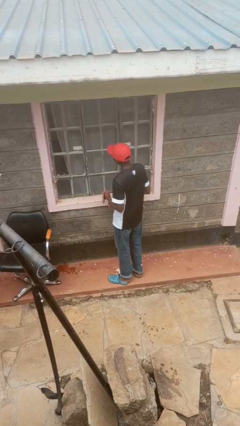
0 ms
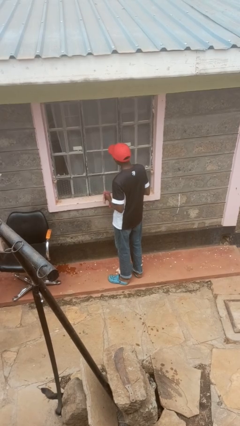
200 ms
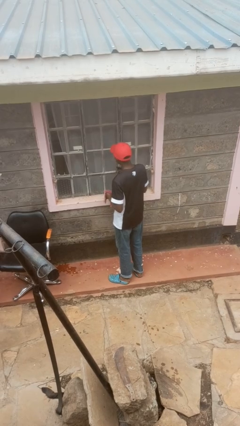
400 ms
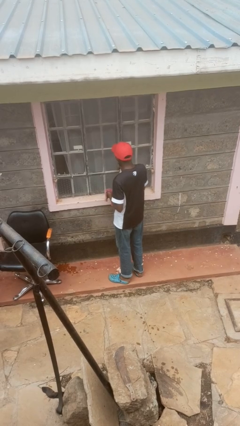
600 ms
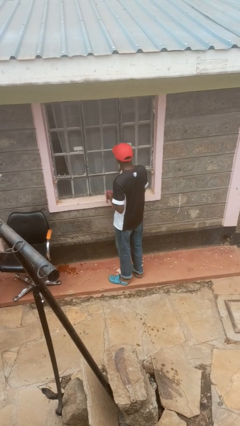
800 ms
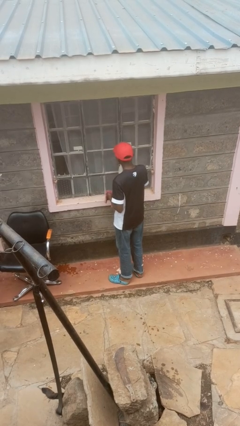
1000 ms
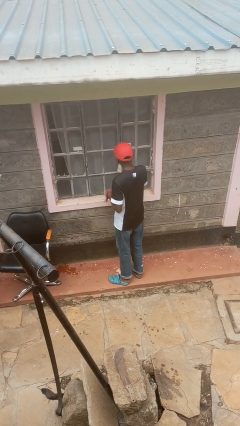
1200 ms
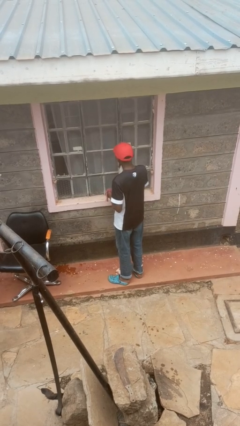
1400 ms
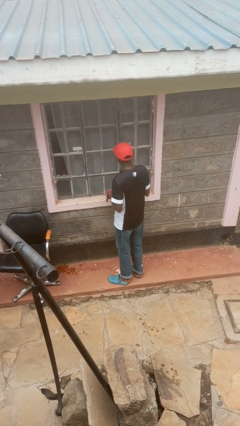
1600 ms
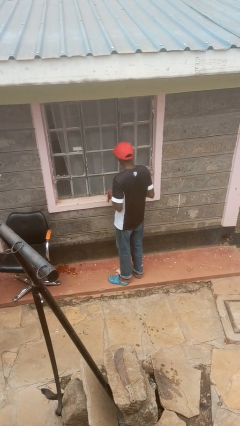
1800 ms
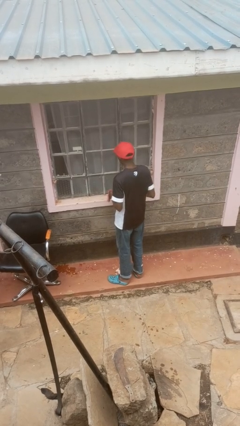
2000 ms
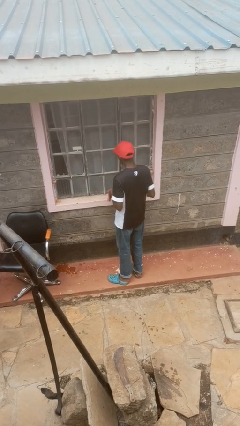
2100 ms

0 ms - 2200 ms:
person sprays from bottle

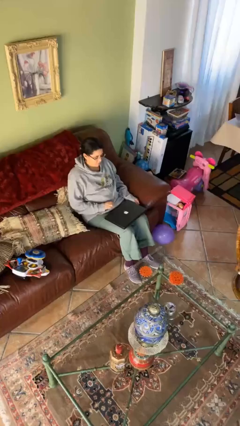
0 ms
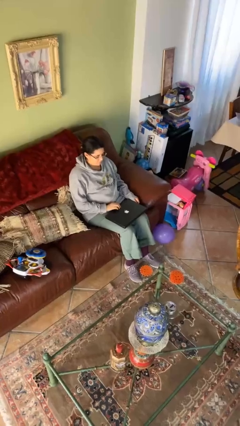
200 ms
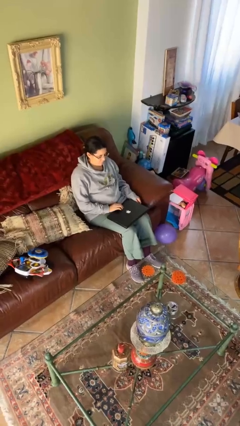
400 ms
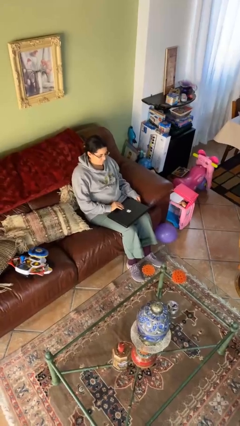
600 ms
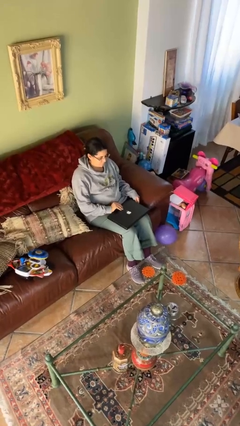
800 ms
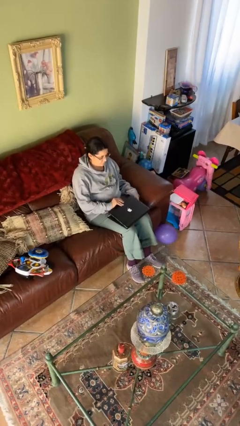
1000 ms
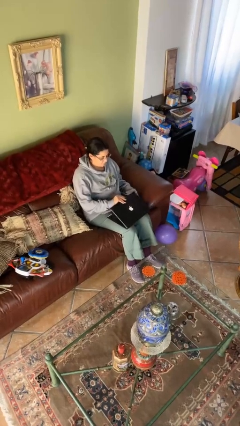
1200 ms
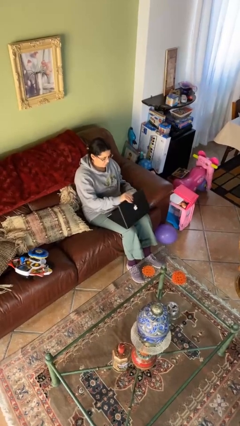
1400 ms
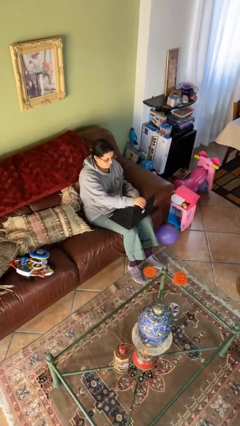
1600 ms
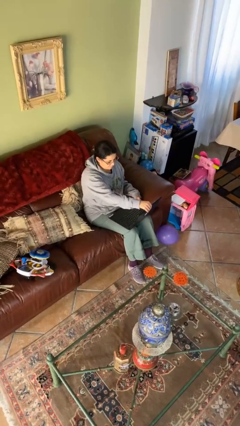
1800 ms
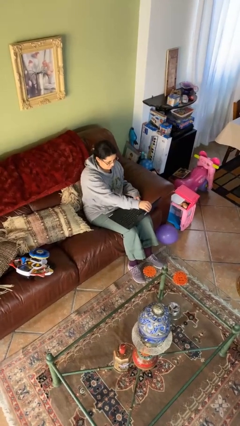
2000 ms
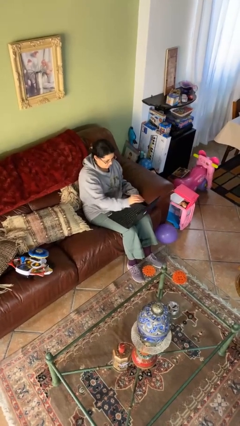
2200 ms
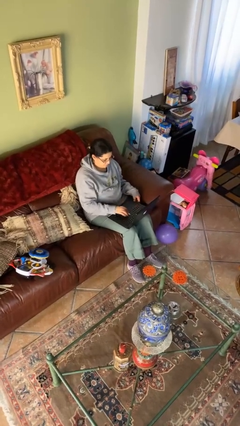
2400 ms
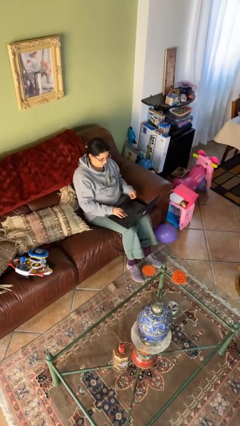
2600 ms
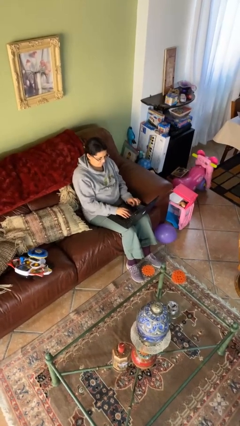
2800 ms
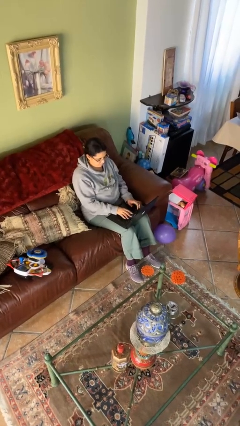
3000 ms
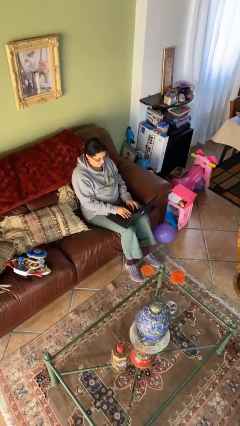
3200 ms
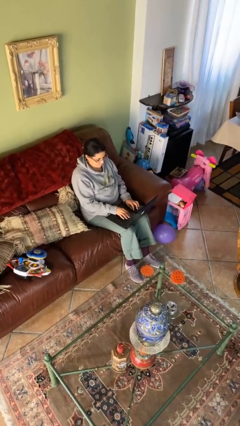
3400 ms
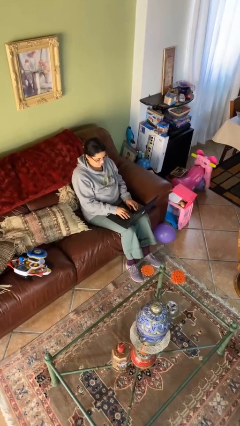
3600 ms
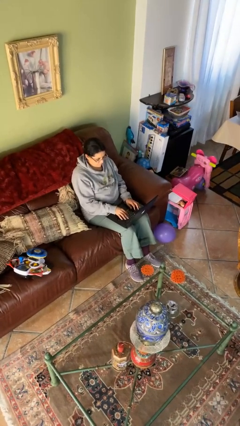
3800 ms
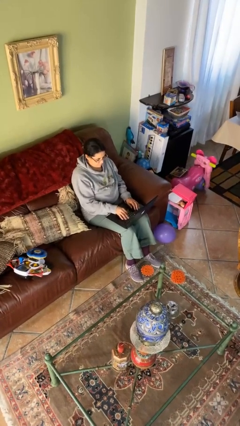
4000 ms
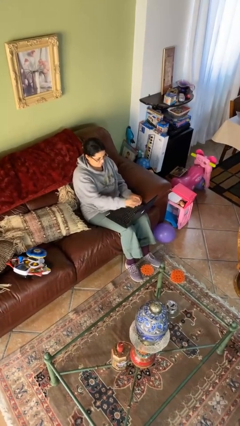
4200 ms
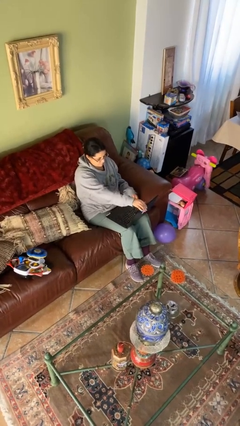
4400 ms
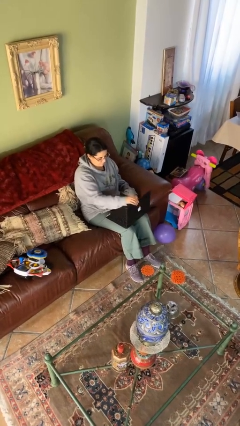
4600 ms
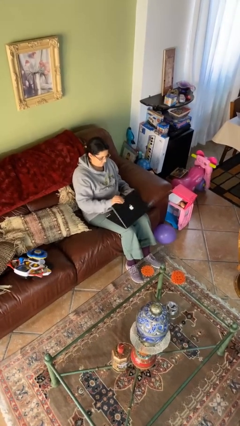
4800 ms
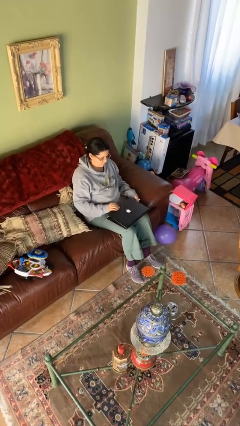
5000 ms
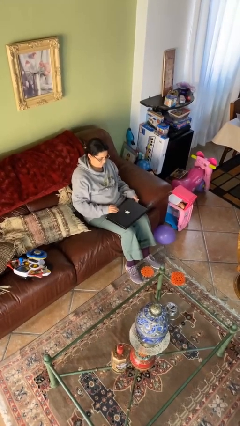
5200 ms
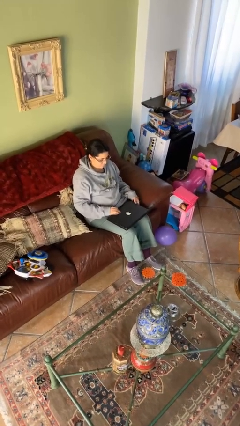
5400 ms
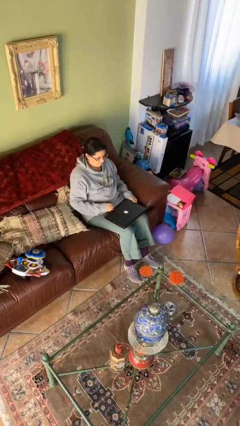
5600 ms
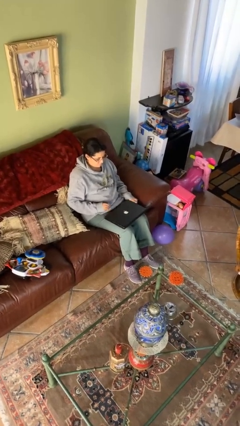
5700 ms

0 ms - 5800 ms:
person interacts with laptop

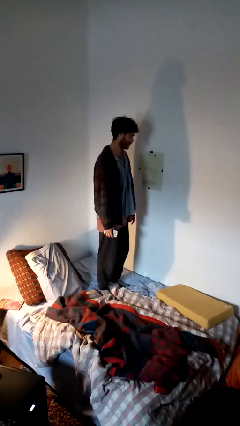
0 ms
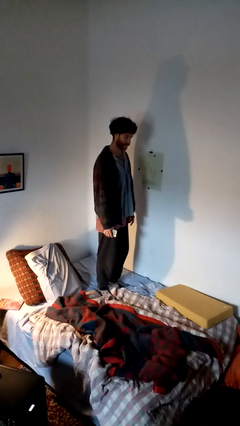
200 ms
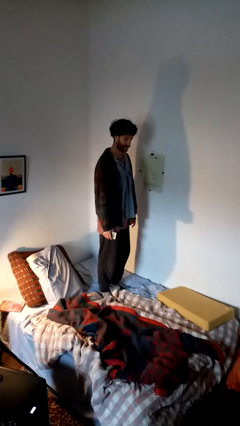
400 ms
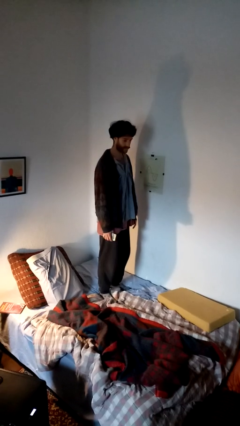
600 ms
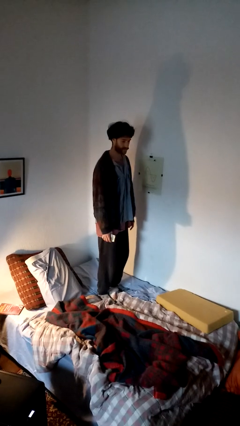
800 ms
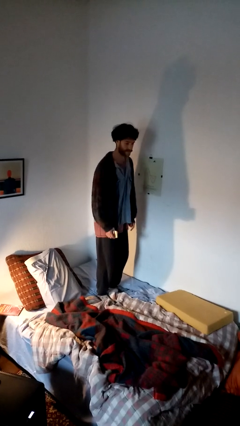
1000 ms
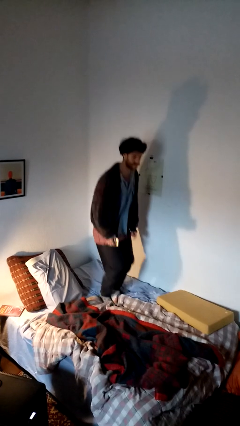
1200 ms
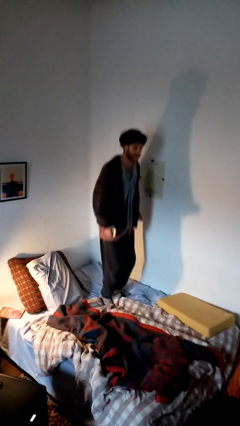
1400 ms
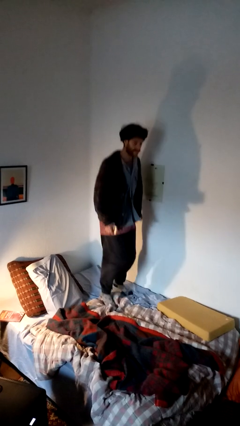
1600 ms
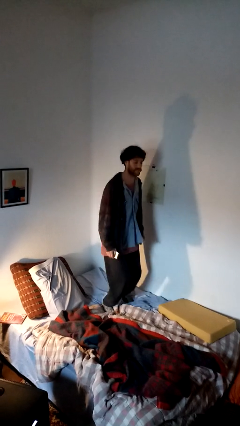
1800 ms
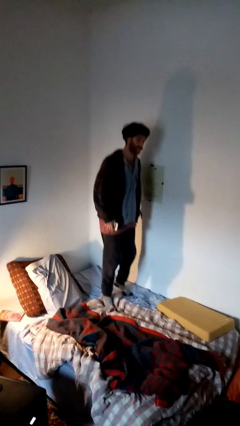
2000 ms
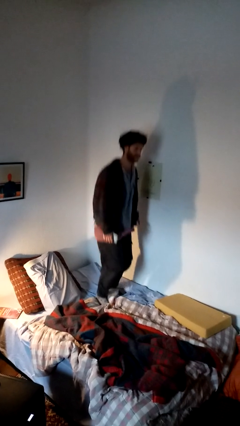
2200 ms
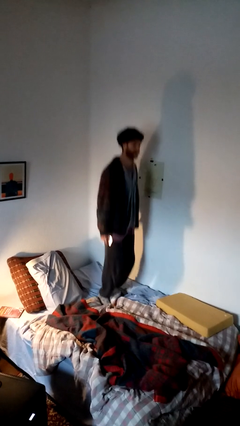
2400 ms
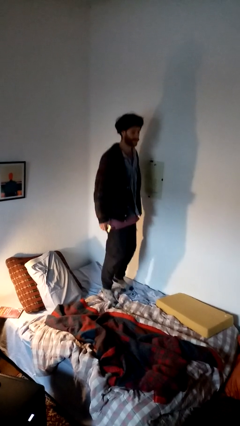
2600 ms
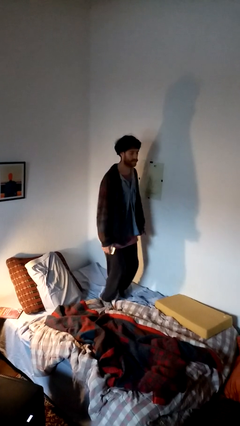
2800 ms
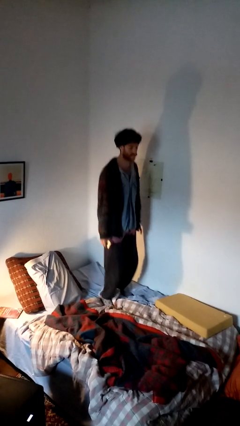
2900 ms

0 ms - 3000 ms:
person jumps on bed

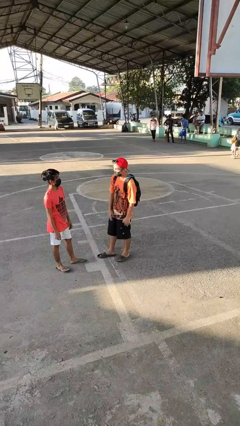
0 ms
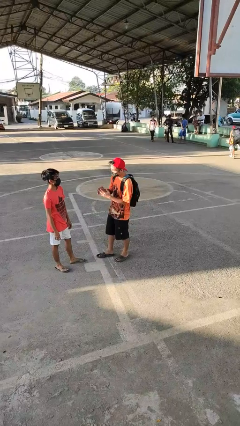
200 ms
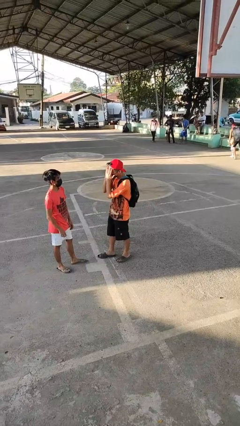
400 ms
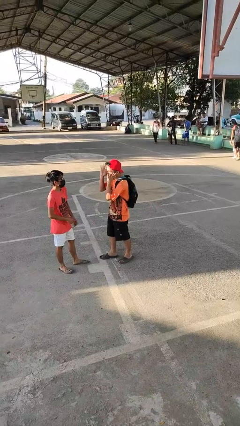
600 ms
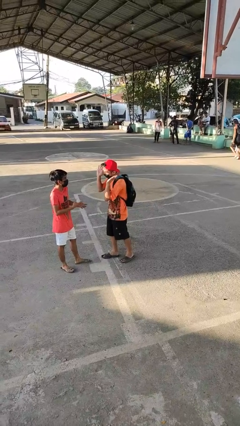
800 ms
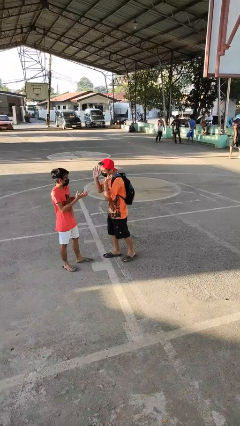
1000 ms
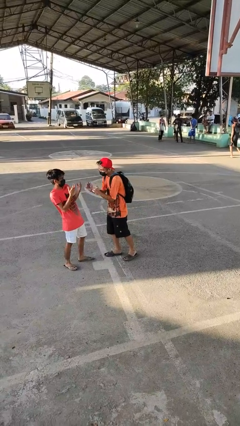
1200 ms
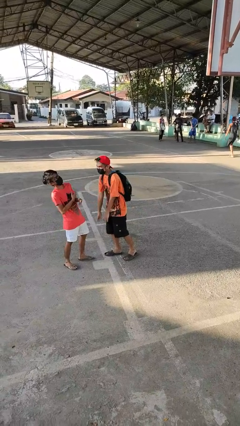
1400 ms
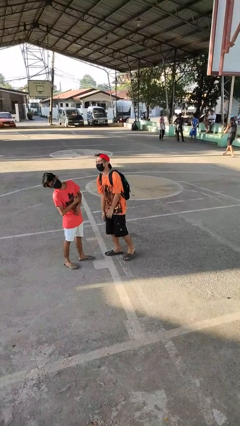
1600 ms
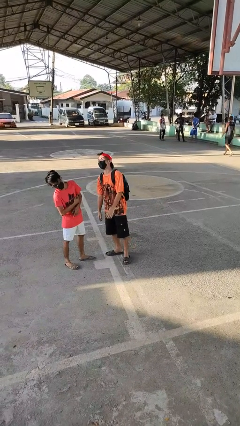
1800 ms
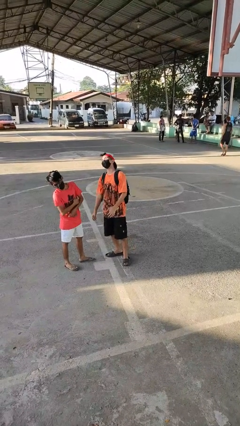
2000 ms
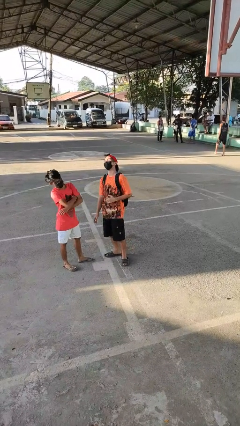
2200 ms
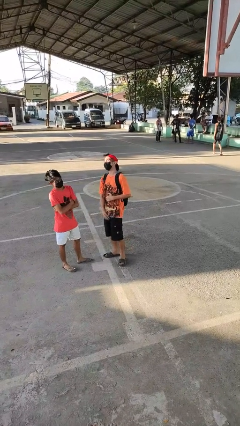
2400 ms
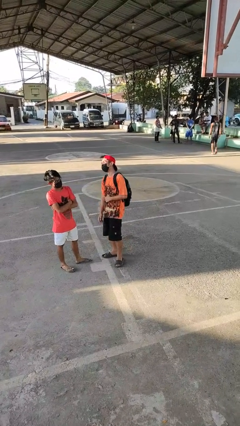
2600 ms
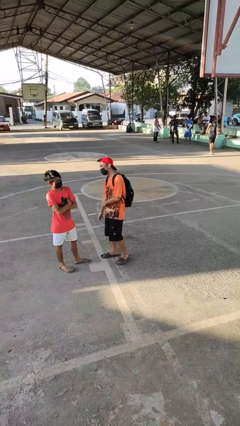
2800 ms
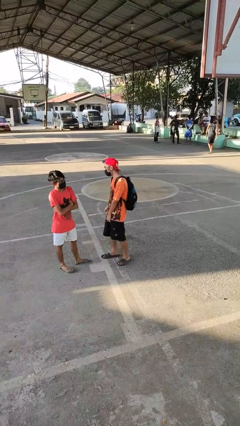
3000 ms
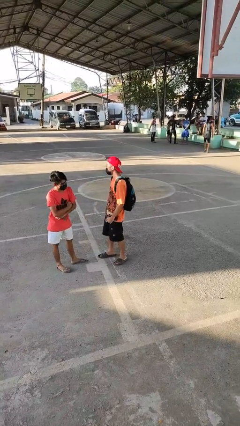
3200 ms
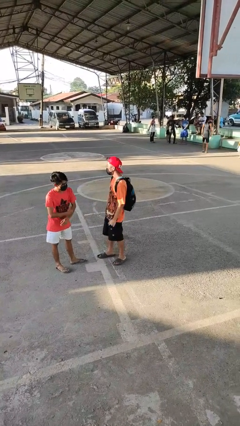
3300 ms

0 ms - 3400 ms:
person laughs with person

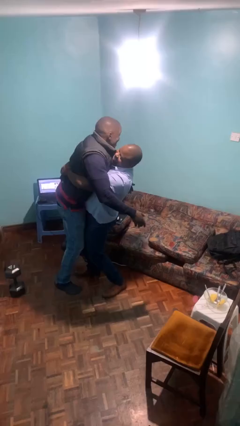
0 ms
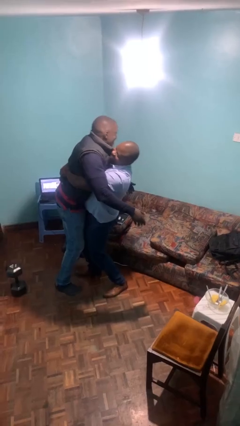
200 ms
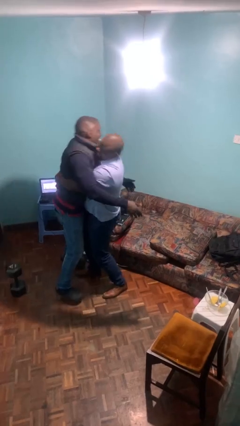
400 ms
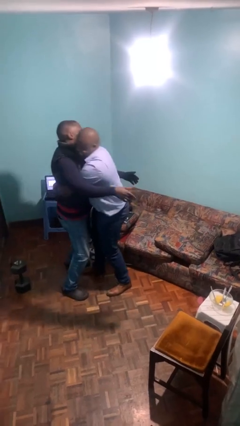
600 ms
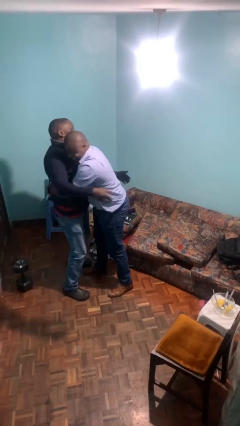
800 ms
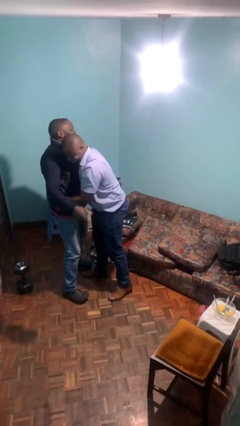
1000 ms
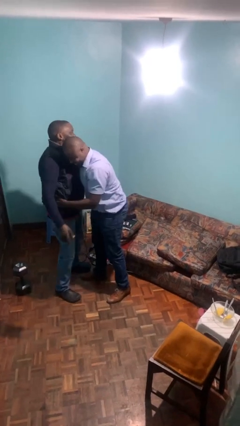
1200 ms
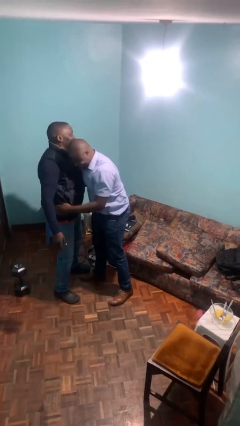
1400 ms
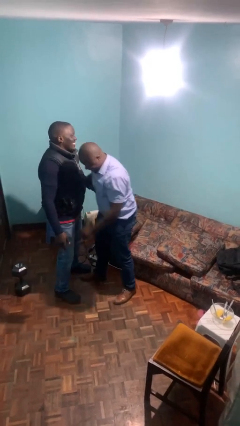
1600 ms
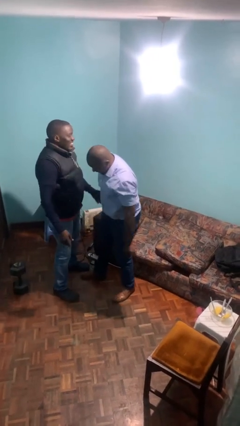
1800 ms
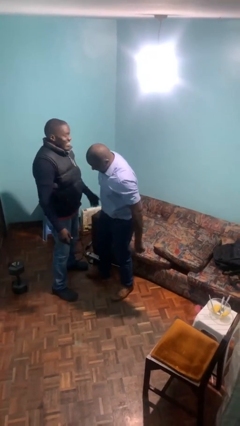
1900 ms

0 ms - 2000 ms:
person puts down person

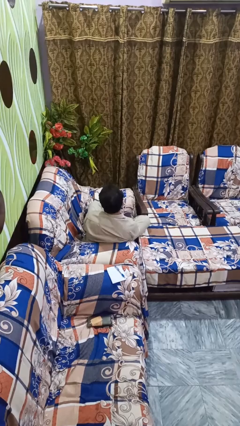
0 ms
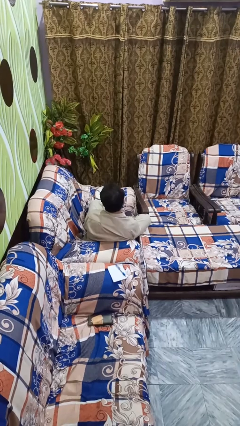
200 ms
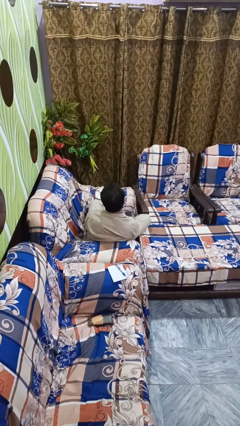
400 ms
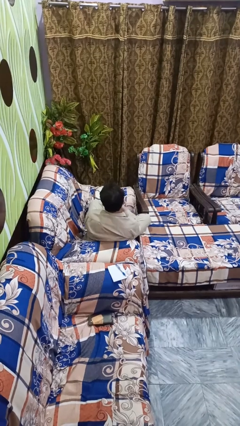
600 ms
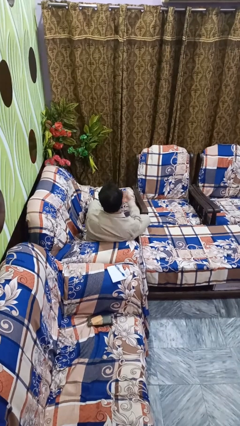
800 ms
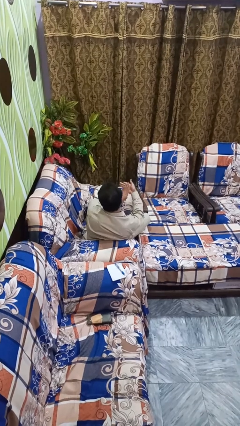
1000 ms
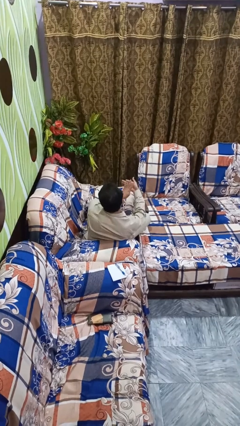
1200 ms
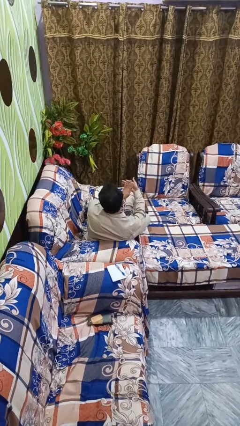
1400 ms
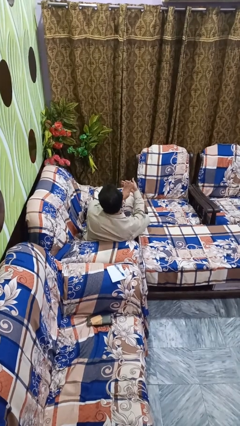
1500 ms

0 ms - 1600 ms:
person gestures number four
